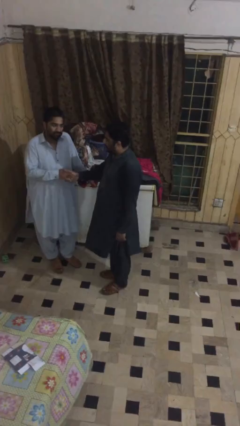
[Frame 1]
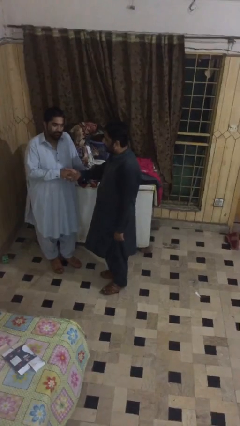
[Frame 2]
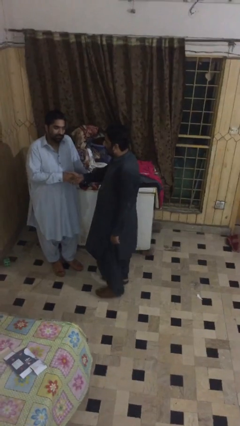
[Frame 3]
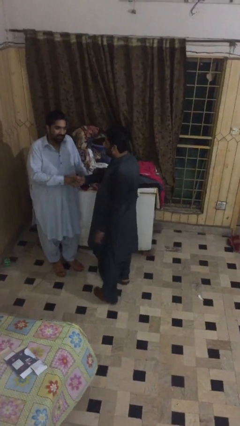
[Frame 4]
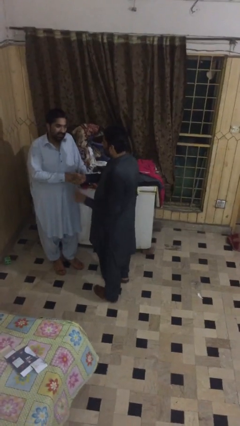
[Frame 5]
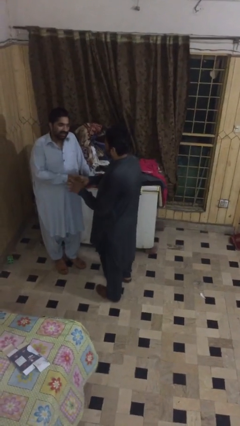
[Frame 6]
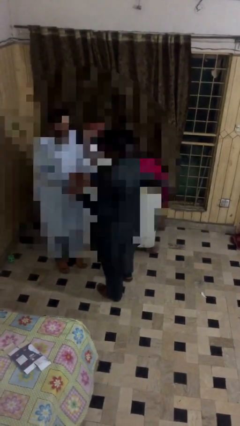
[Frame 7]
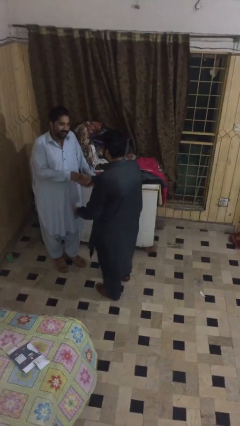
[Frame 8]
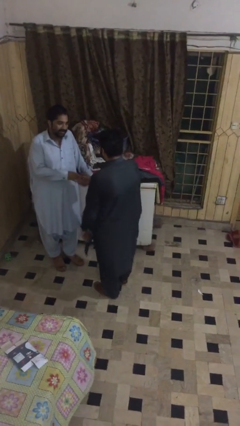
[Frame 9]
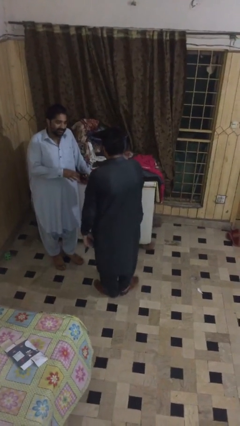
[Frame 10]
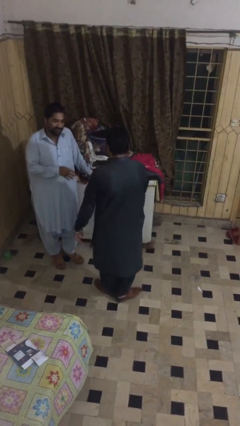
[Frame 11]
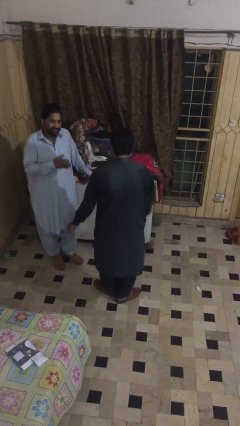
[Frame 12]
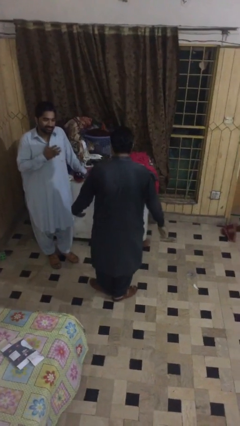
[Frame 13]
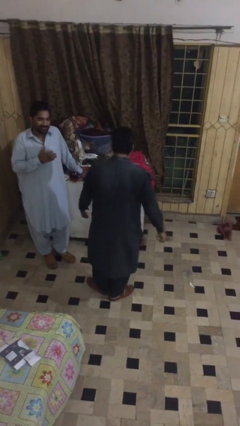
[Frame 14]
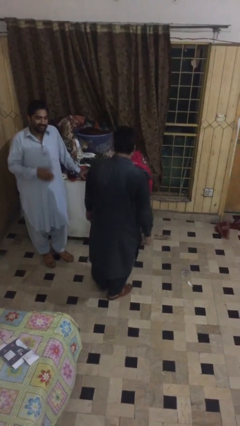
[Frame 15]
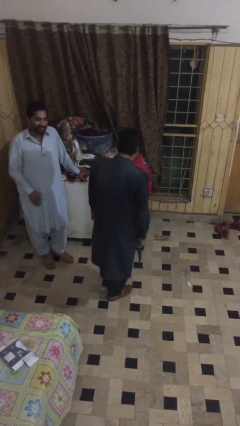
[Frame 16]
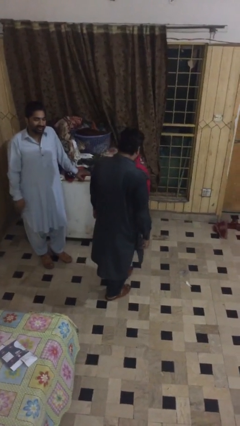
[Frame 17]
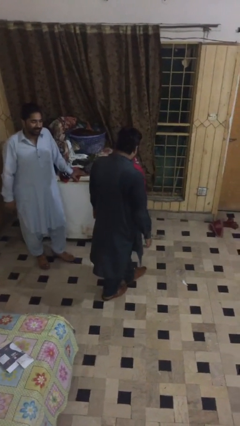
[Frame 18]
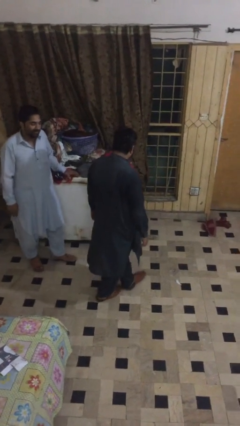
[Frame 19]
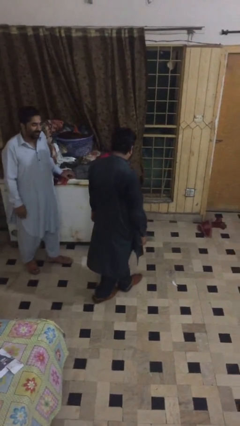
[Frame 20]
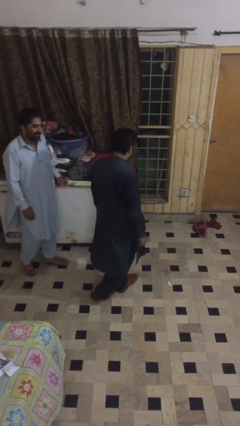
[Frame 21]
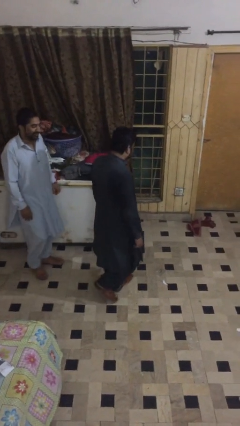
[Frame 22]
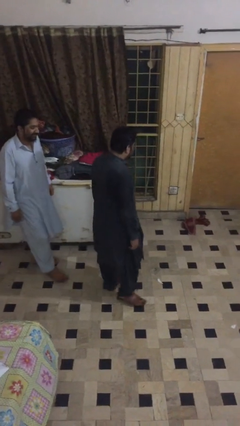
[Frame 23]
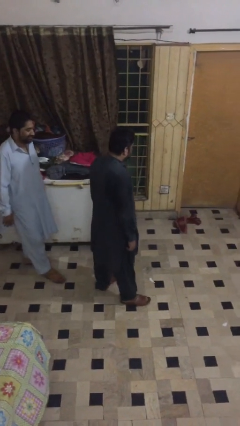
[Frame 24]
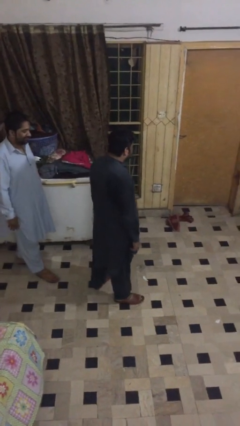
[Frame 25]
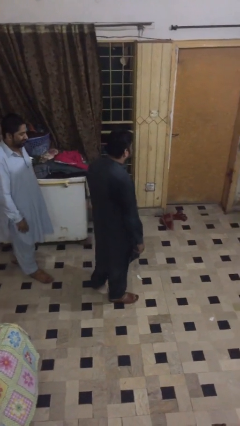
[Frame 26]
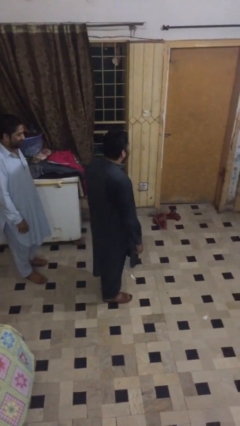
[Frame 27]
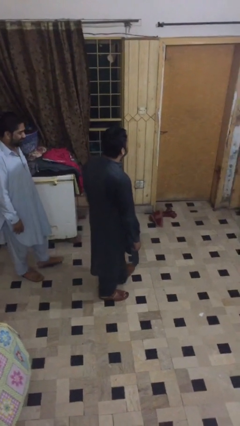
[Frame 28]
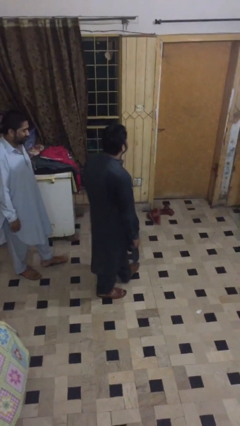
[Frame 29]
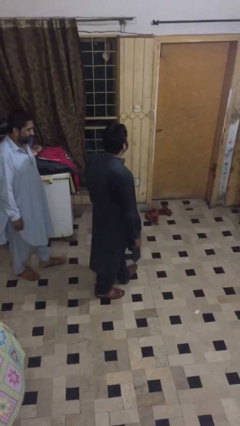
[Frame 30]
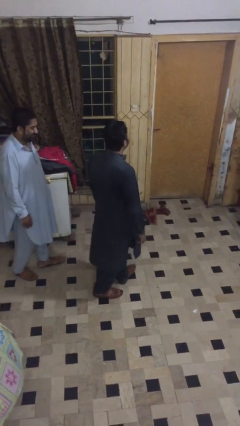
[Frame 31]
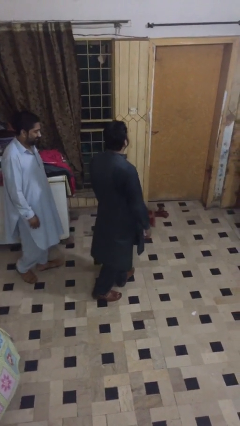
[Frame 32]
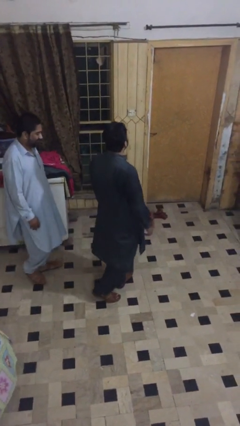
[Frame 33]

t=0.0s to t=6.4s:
person talks to person

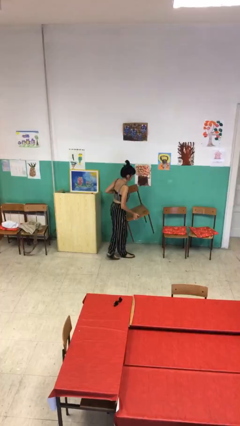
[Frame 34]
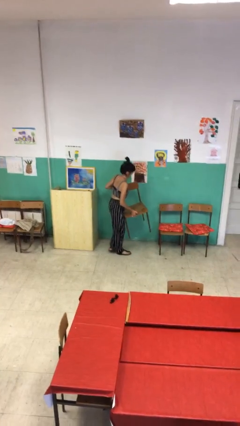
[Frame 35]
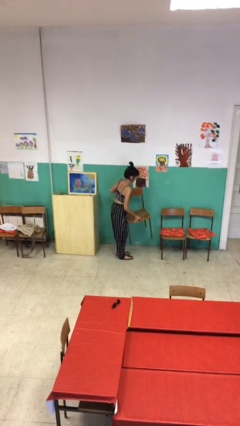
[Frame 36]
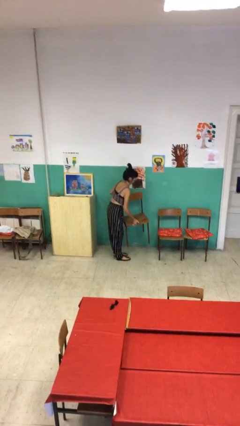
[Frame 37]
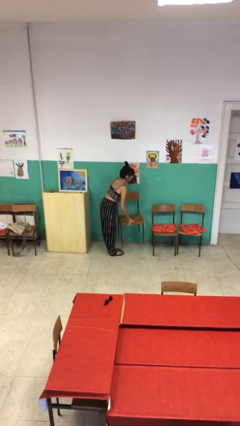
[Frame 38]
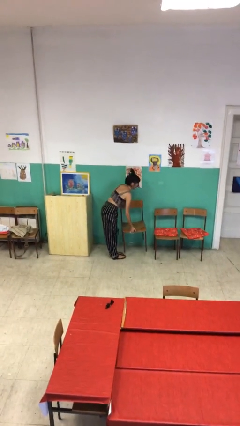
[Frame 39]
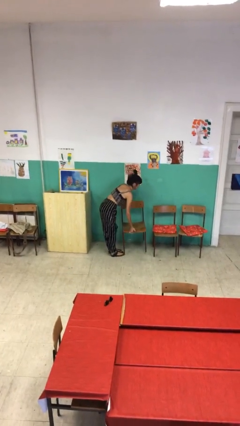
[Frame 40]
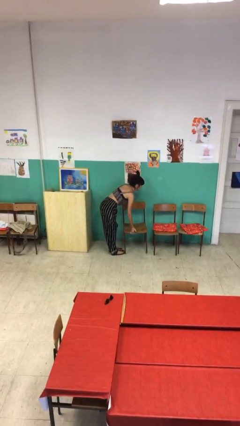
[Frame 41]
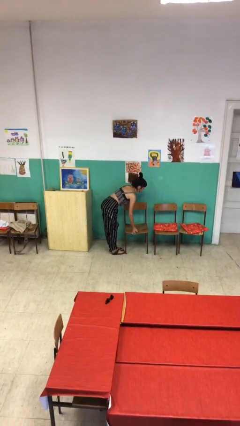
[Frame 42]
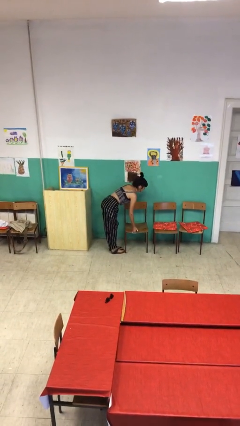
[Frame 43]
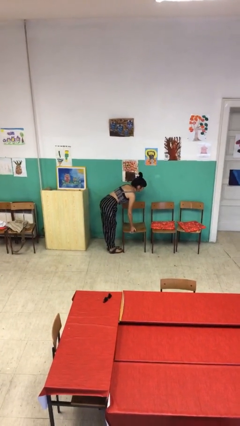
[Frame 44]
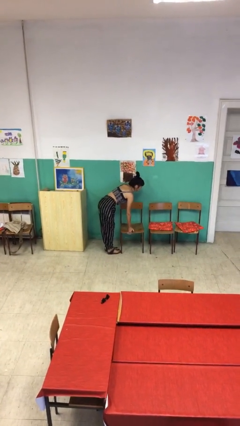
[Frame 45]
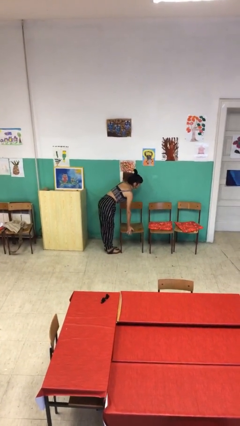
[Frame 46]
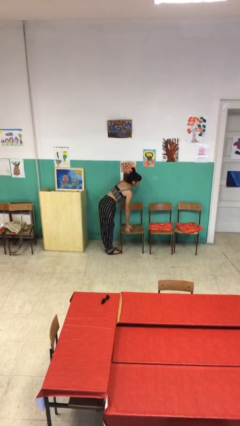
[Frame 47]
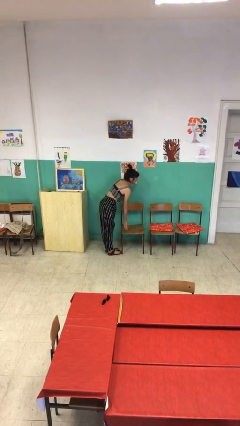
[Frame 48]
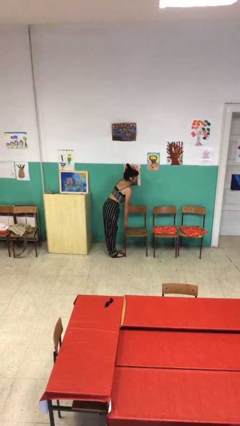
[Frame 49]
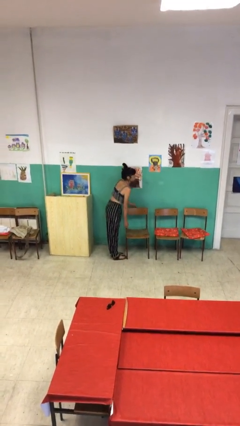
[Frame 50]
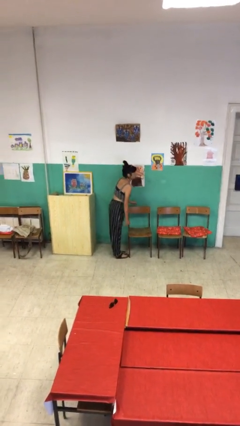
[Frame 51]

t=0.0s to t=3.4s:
person puts down object on floor

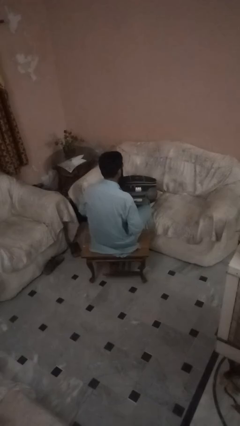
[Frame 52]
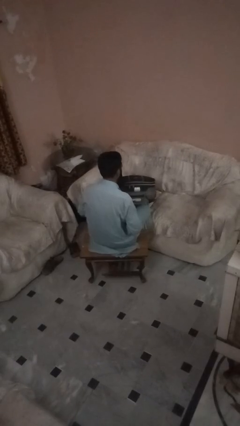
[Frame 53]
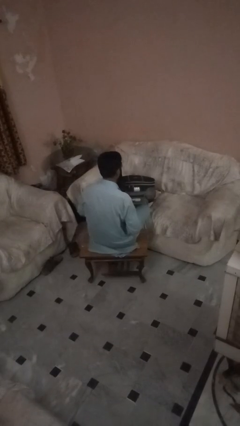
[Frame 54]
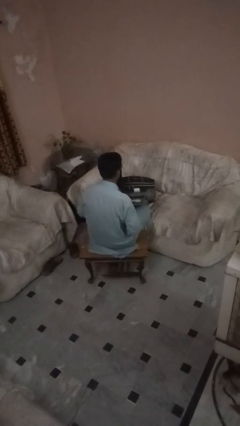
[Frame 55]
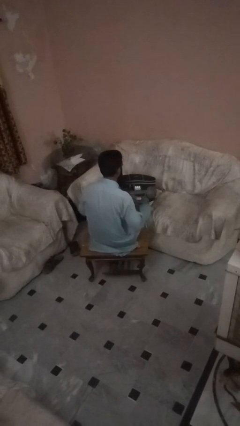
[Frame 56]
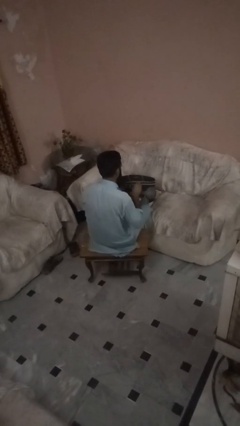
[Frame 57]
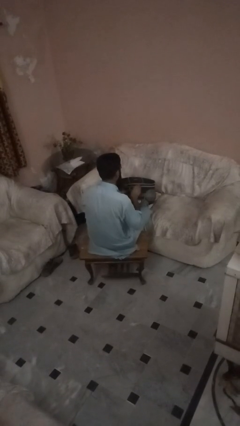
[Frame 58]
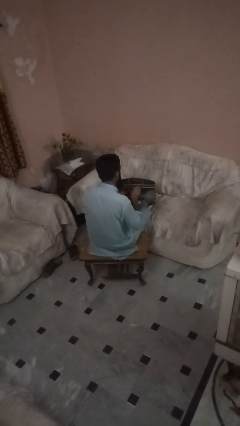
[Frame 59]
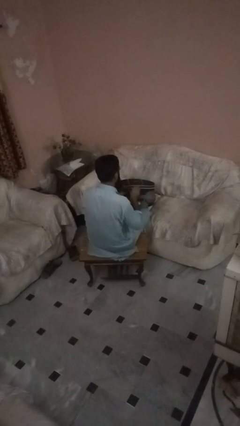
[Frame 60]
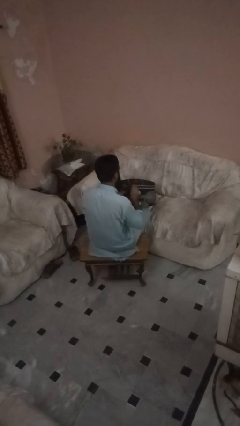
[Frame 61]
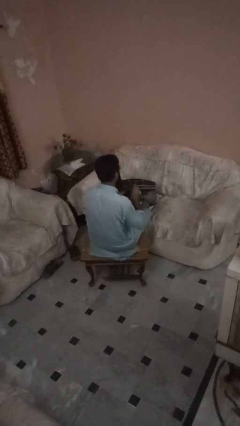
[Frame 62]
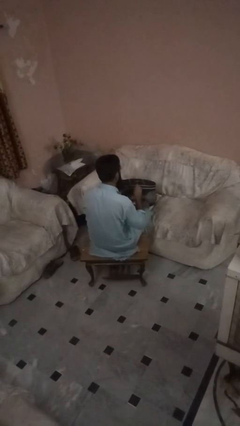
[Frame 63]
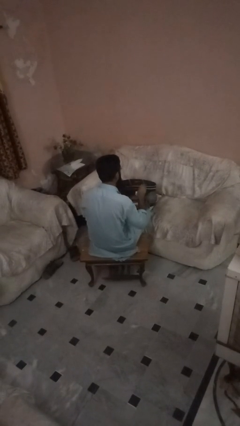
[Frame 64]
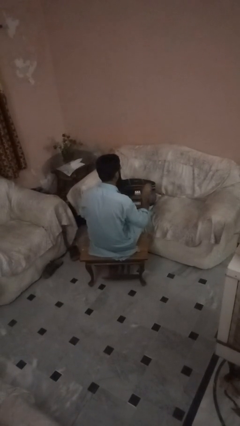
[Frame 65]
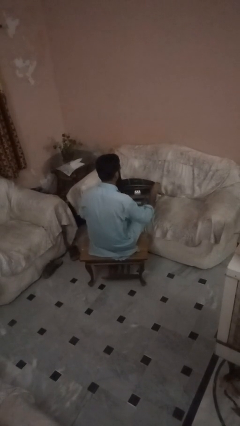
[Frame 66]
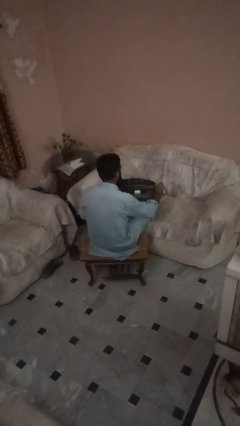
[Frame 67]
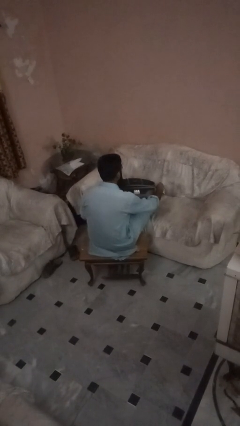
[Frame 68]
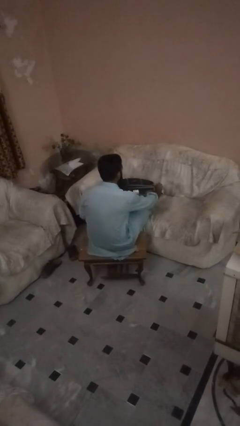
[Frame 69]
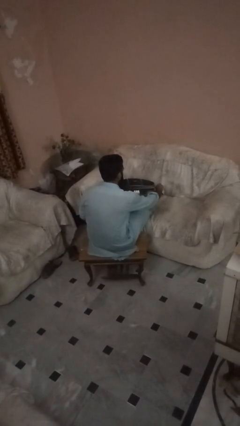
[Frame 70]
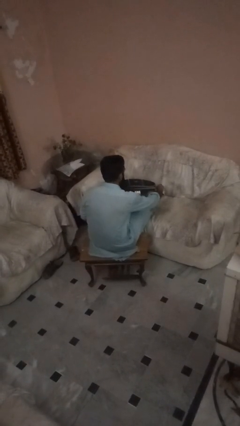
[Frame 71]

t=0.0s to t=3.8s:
person opens suitcase

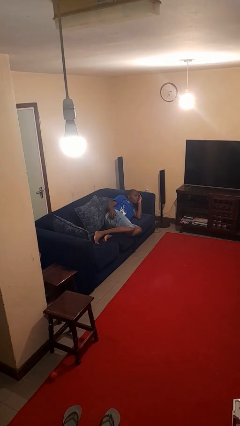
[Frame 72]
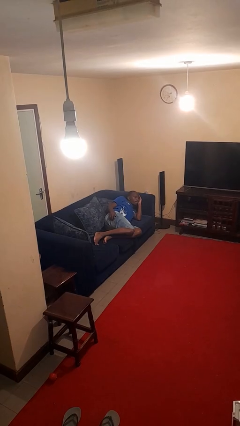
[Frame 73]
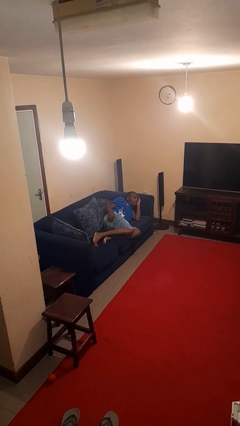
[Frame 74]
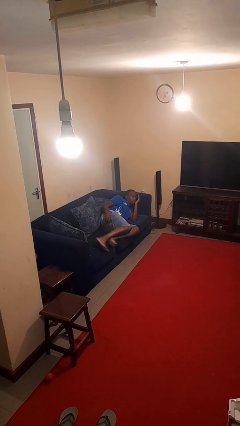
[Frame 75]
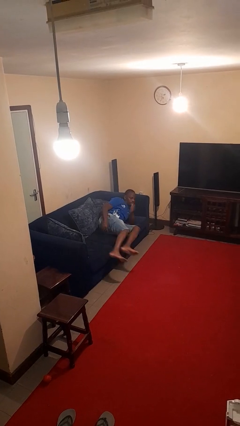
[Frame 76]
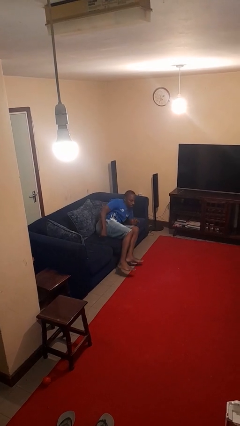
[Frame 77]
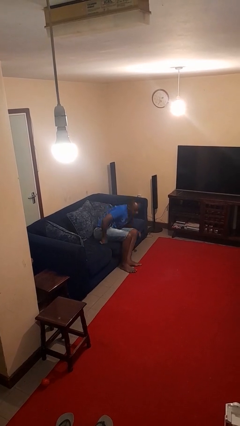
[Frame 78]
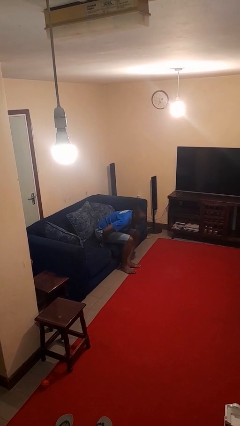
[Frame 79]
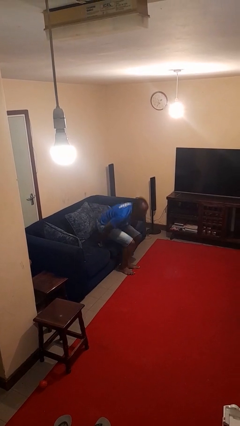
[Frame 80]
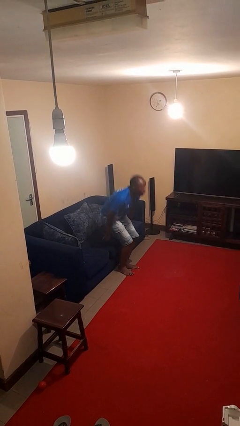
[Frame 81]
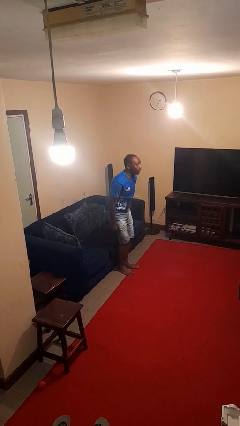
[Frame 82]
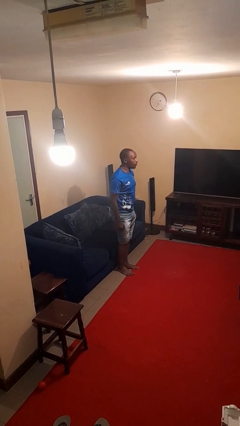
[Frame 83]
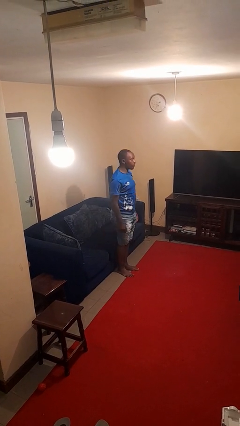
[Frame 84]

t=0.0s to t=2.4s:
person stands up

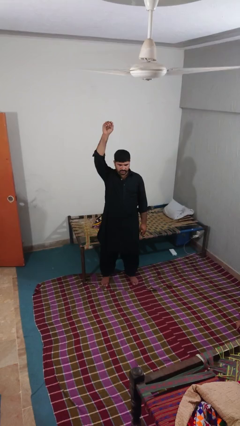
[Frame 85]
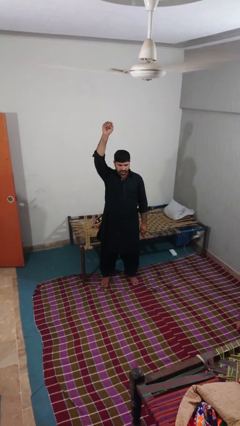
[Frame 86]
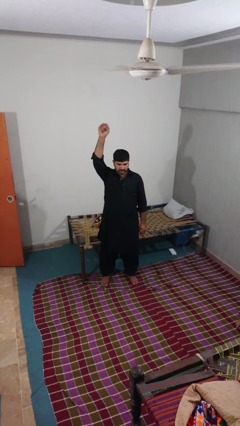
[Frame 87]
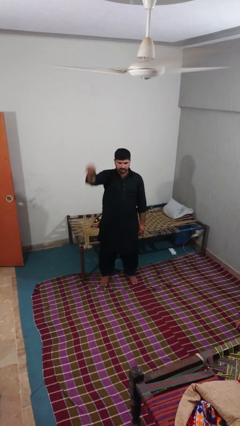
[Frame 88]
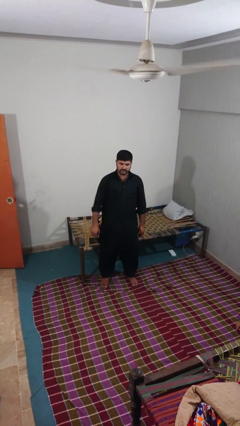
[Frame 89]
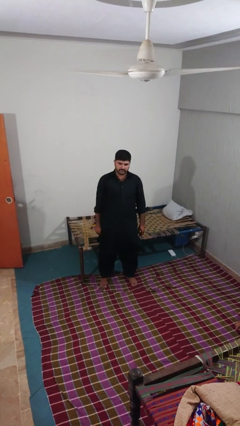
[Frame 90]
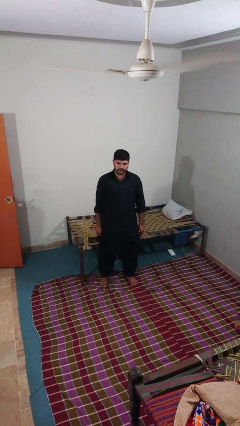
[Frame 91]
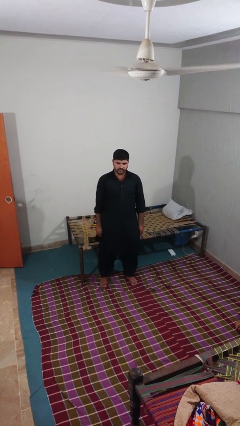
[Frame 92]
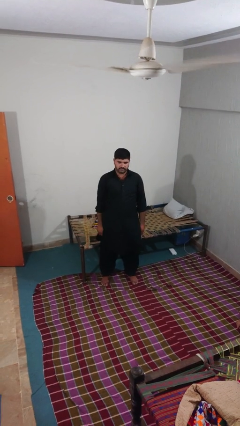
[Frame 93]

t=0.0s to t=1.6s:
person gestures lower hand
